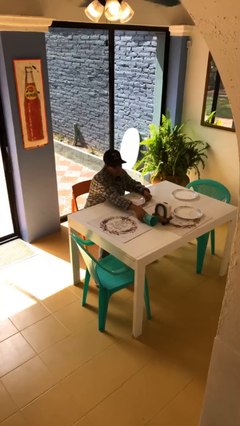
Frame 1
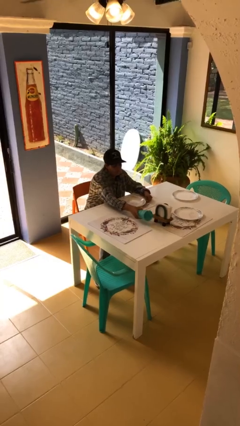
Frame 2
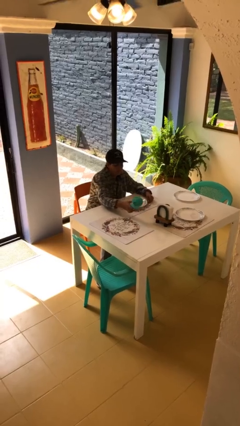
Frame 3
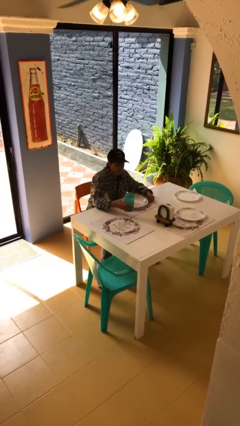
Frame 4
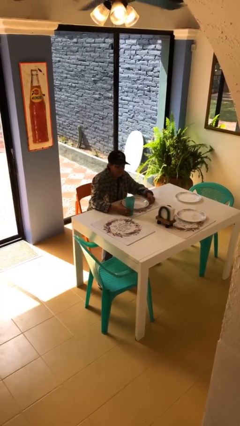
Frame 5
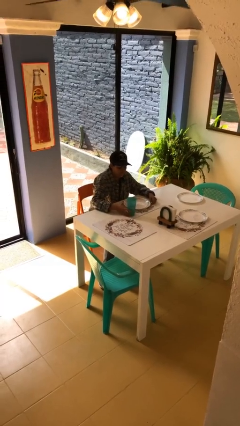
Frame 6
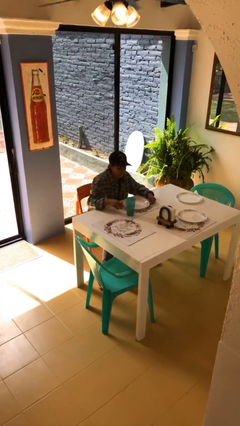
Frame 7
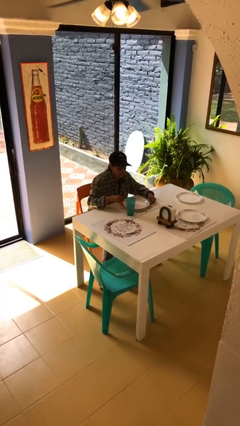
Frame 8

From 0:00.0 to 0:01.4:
person sets upright glass

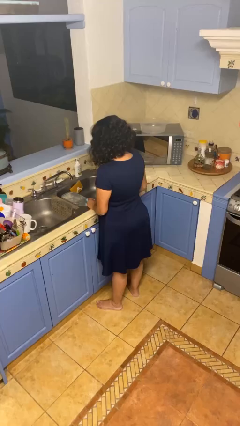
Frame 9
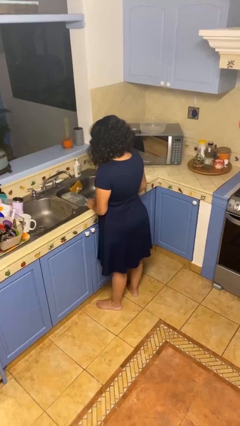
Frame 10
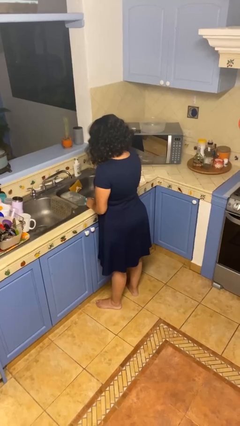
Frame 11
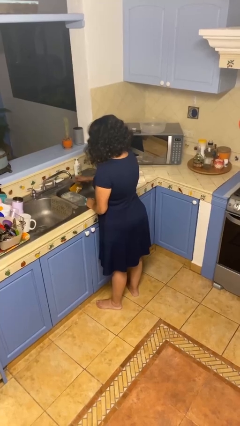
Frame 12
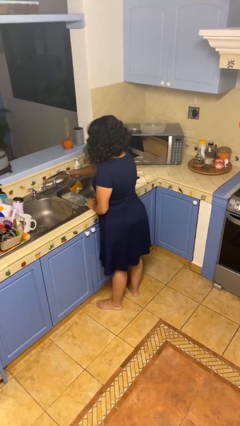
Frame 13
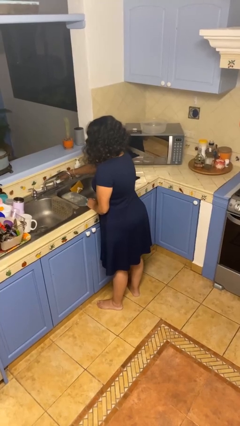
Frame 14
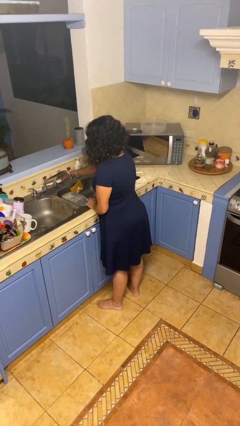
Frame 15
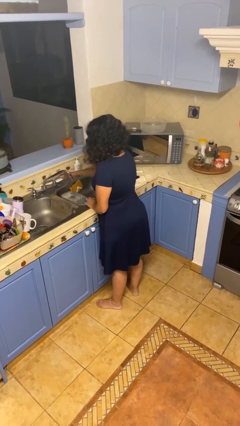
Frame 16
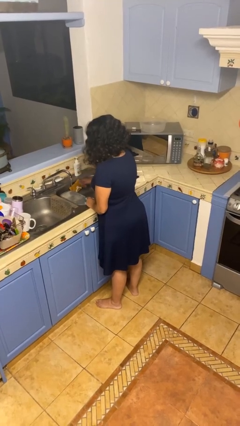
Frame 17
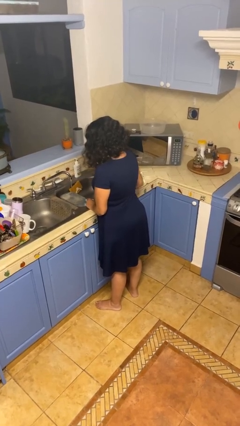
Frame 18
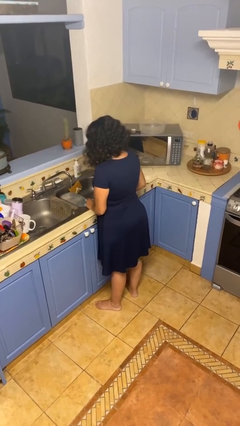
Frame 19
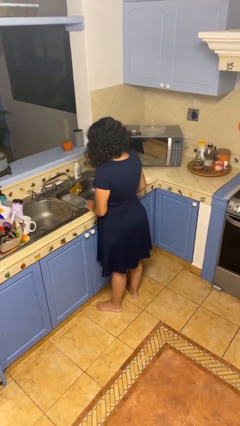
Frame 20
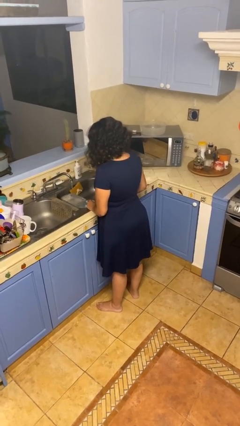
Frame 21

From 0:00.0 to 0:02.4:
person turns on faucet

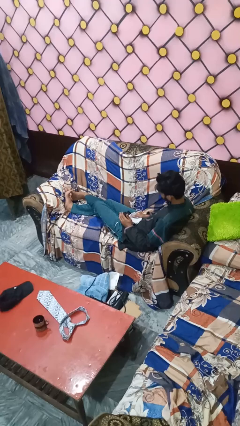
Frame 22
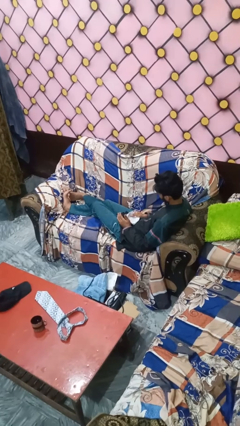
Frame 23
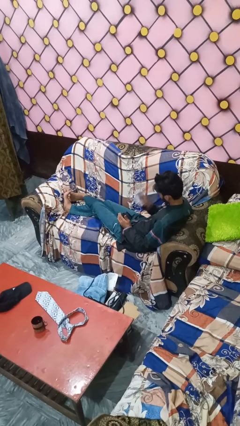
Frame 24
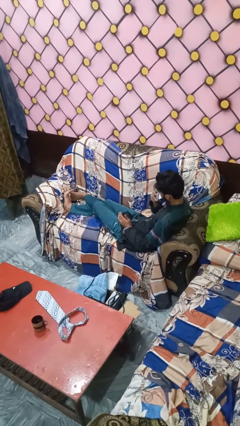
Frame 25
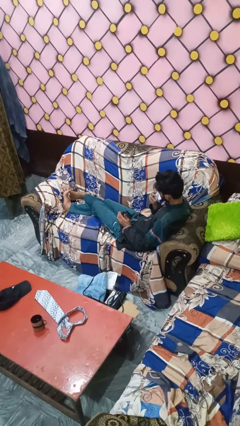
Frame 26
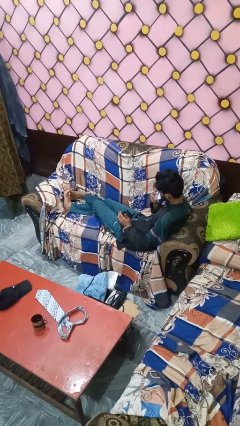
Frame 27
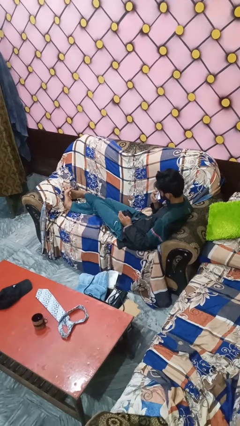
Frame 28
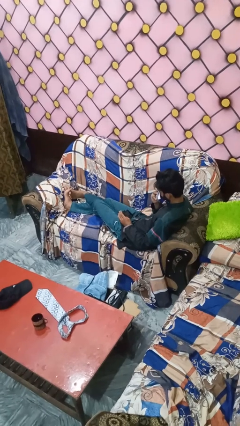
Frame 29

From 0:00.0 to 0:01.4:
person blows nose

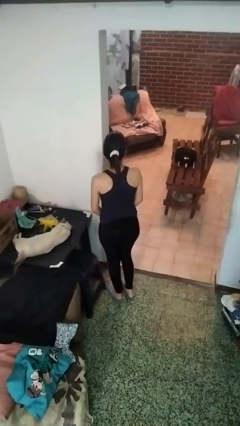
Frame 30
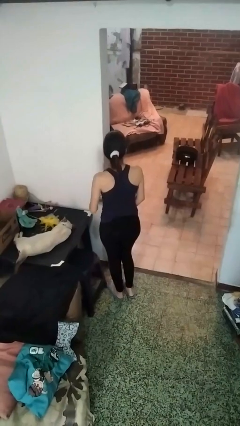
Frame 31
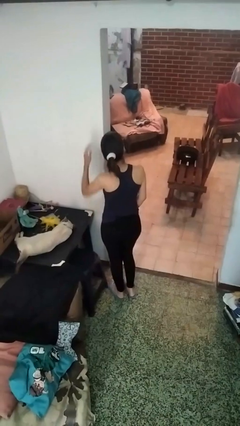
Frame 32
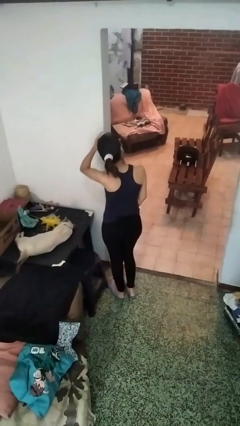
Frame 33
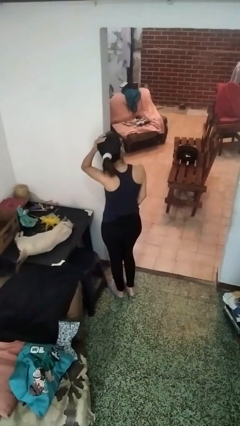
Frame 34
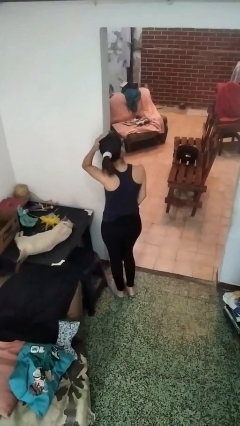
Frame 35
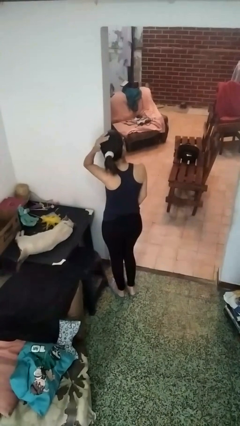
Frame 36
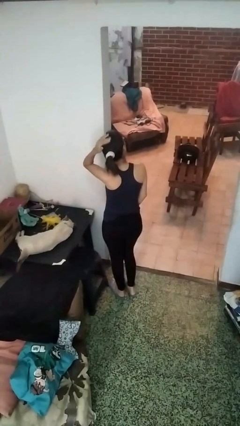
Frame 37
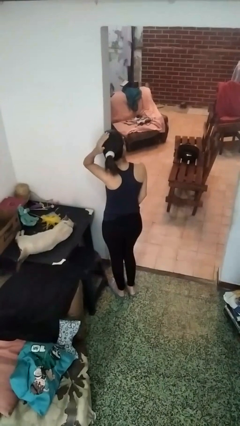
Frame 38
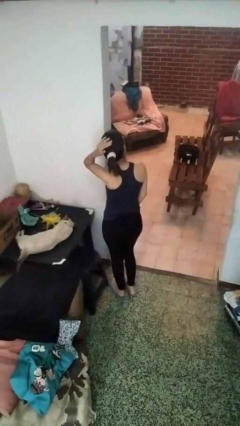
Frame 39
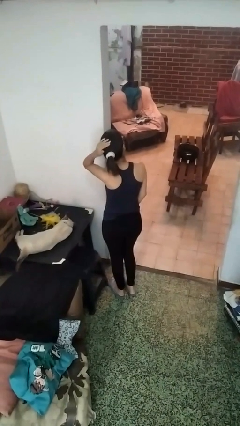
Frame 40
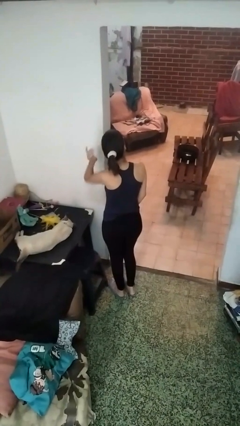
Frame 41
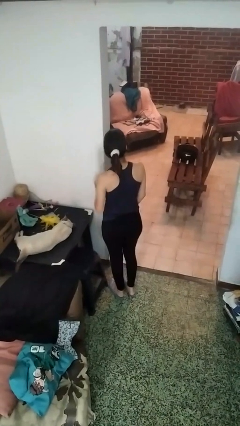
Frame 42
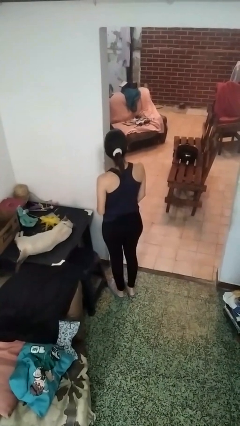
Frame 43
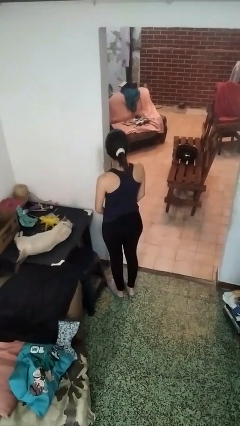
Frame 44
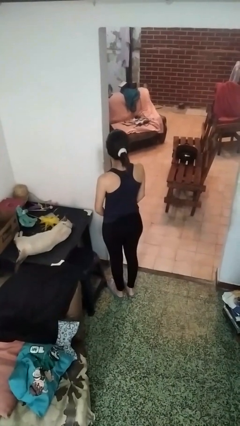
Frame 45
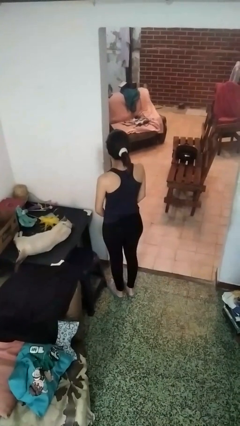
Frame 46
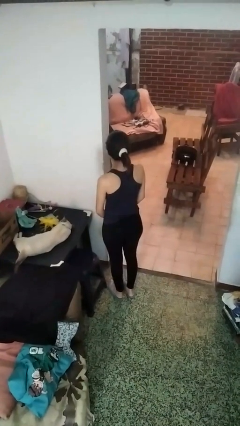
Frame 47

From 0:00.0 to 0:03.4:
person pats head

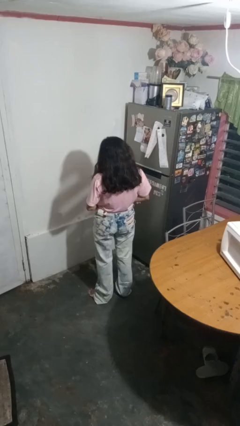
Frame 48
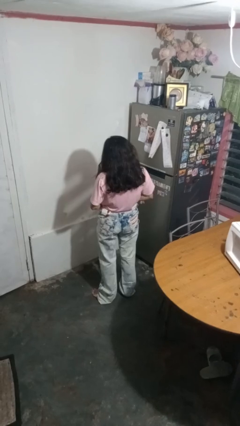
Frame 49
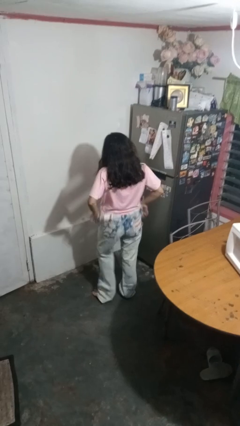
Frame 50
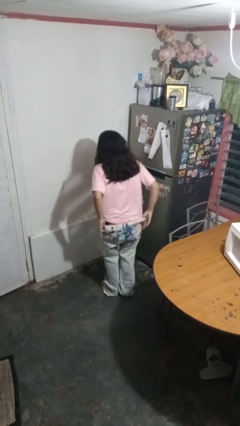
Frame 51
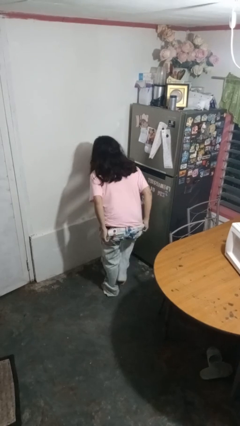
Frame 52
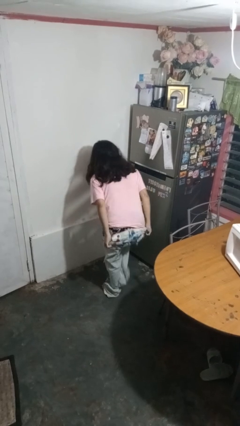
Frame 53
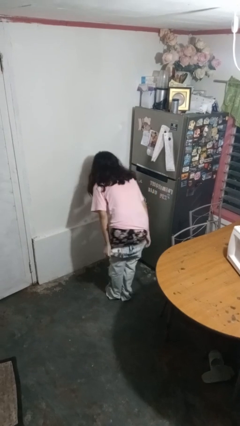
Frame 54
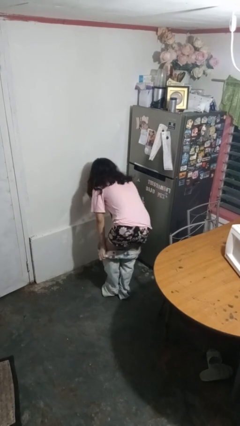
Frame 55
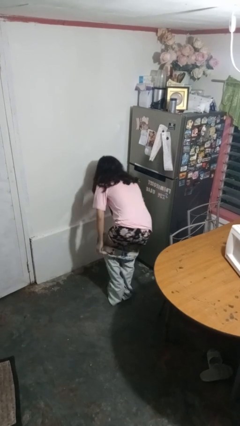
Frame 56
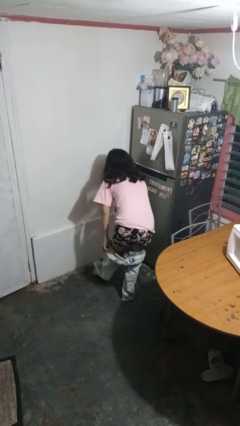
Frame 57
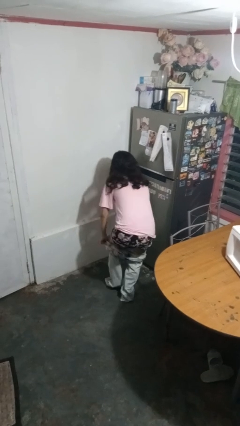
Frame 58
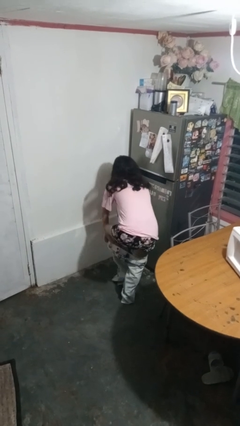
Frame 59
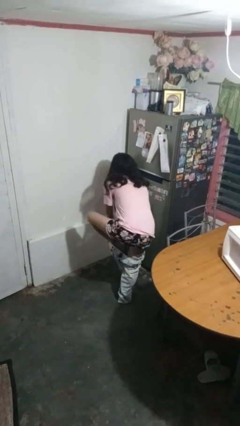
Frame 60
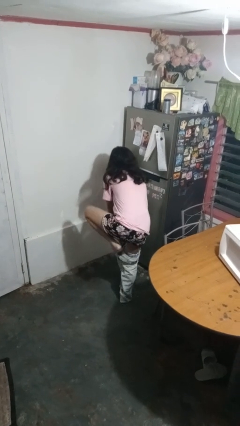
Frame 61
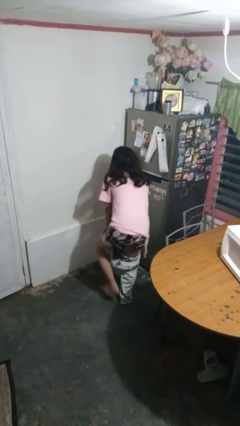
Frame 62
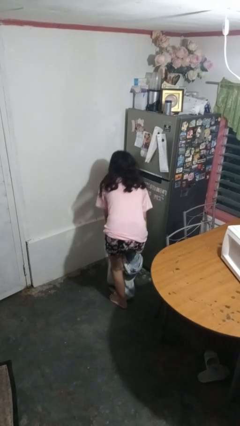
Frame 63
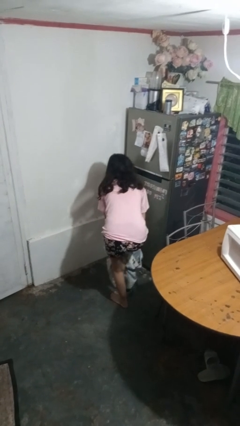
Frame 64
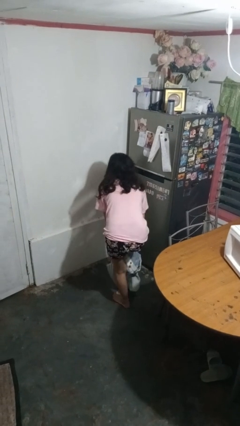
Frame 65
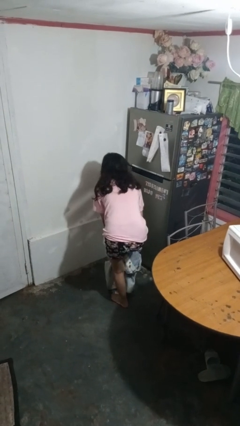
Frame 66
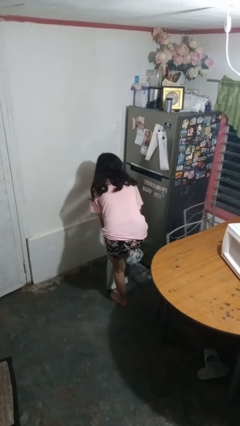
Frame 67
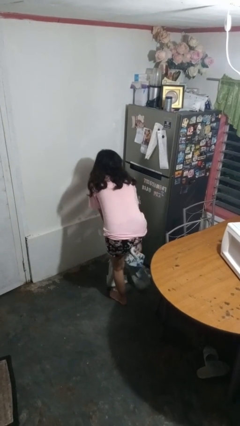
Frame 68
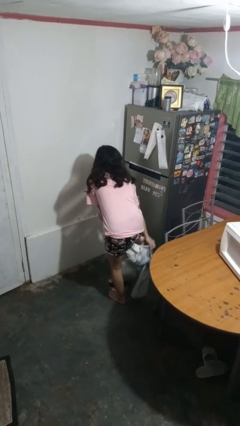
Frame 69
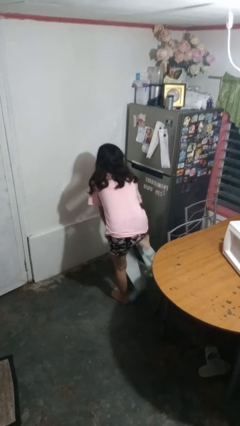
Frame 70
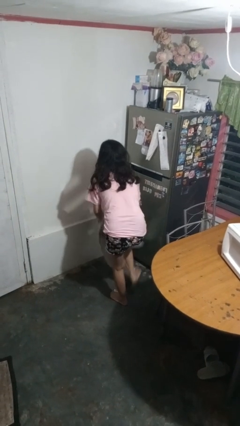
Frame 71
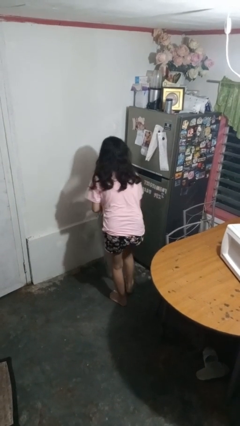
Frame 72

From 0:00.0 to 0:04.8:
person takes off pants

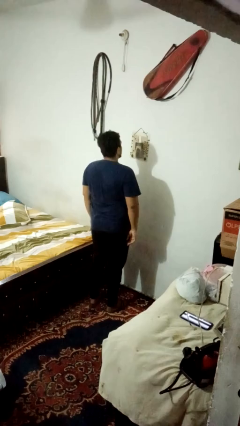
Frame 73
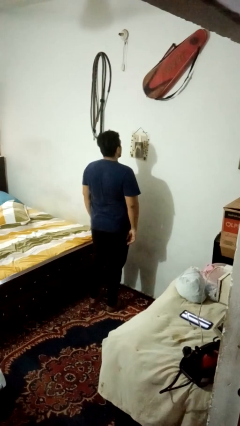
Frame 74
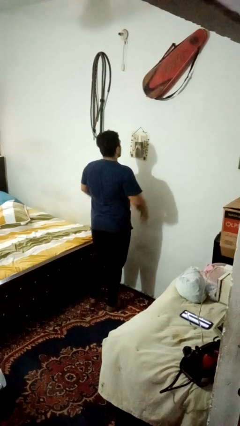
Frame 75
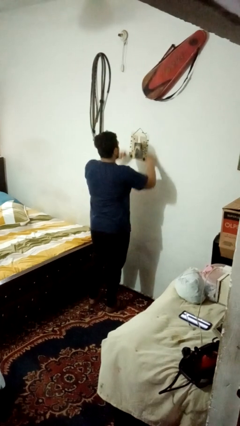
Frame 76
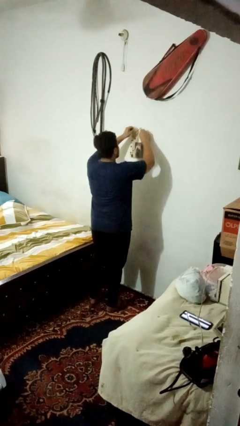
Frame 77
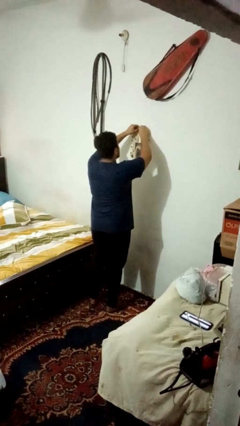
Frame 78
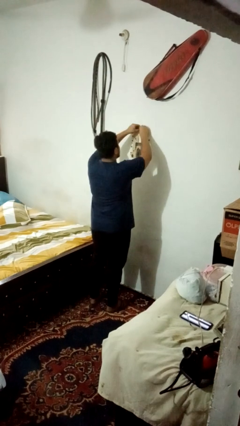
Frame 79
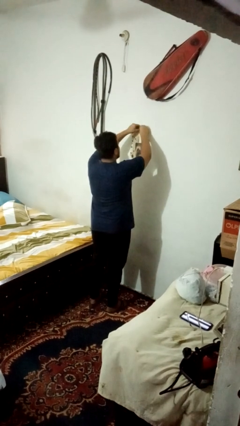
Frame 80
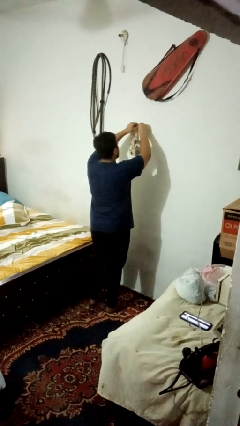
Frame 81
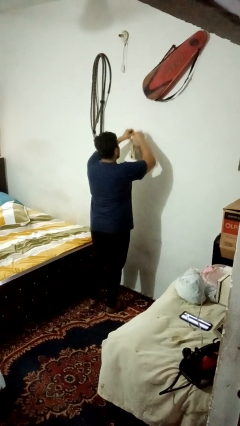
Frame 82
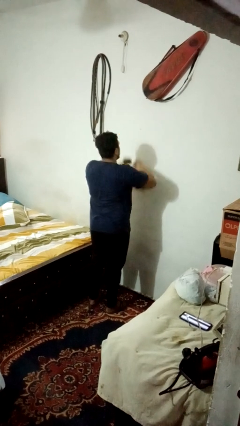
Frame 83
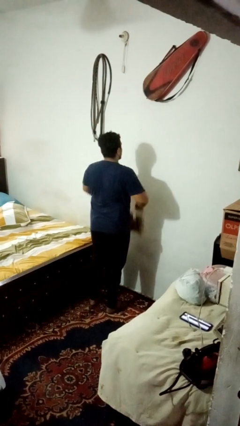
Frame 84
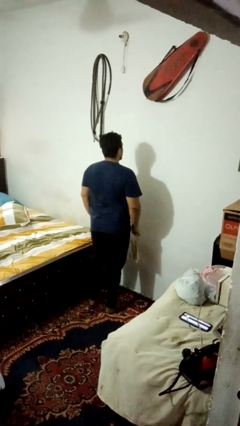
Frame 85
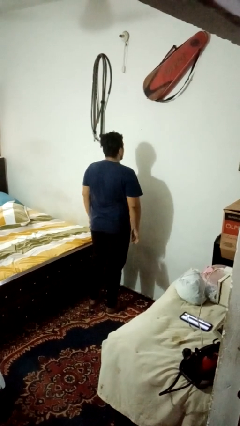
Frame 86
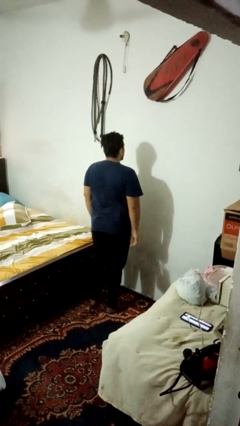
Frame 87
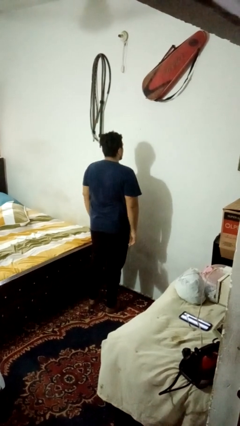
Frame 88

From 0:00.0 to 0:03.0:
person takes down picture frame

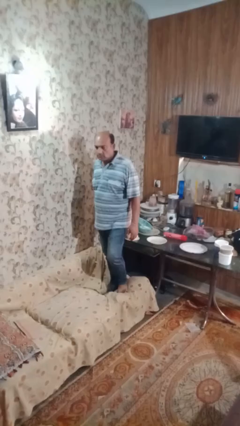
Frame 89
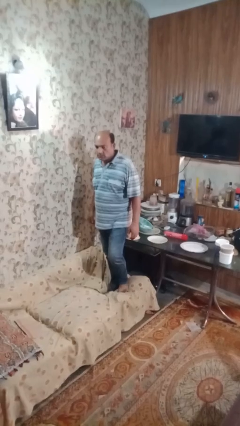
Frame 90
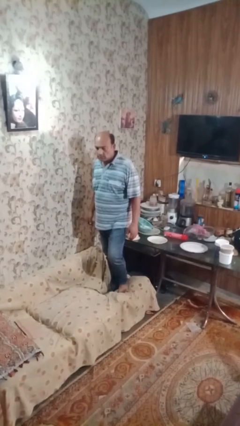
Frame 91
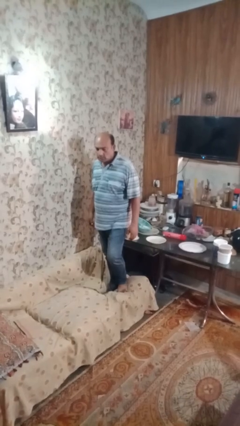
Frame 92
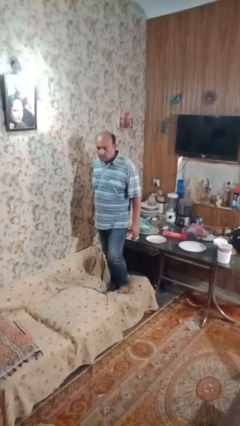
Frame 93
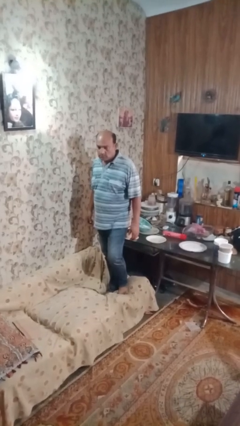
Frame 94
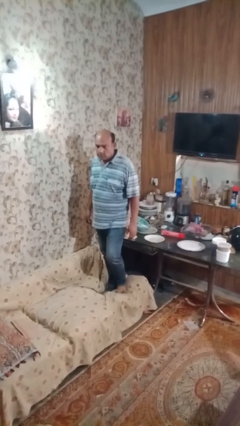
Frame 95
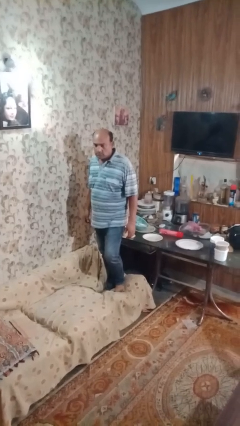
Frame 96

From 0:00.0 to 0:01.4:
person climbs on couch
